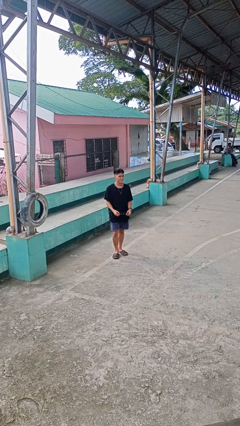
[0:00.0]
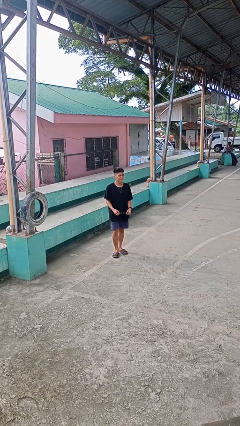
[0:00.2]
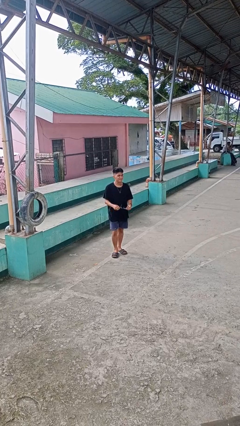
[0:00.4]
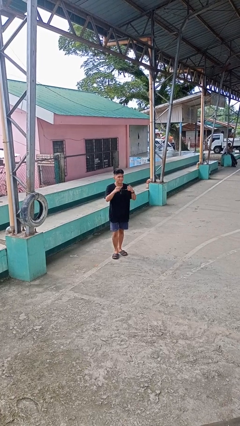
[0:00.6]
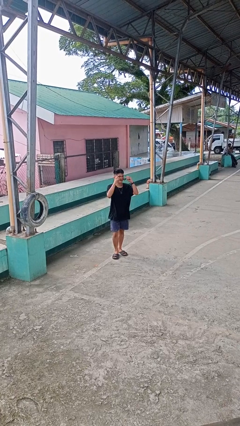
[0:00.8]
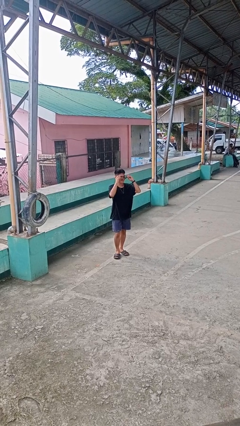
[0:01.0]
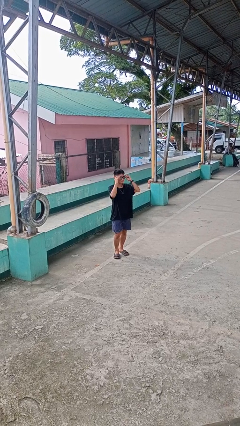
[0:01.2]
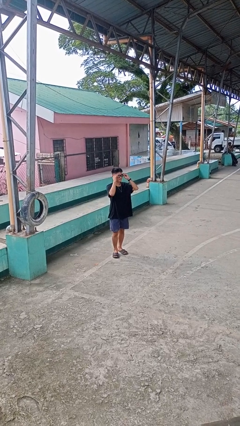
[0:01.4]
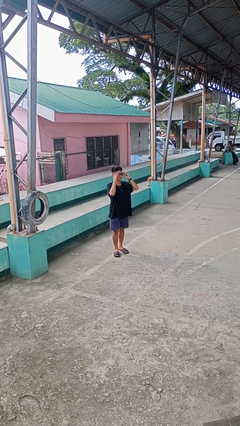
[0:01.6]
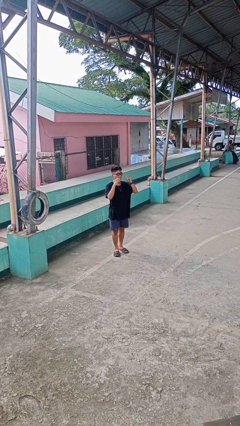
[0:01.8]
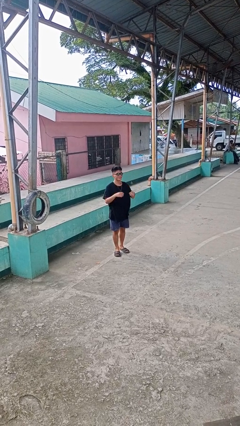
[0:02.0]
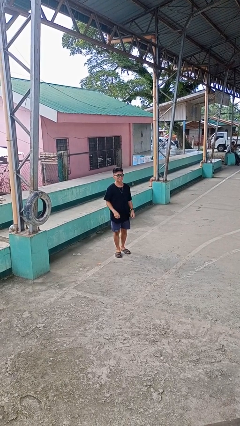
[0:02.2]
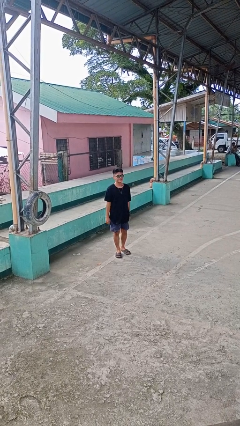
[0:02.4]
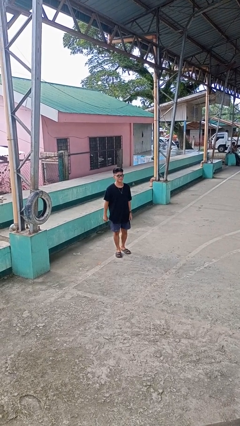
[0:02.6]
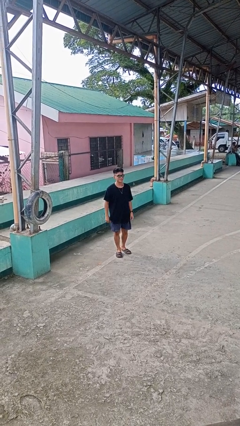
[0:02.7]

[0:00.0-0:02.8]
person puts on sunglasses

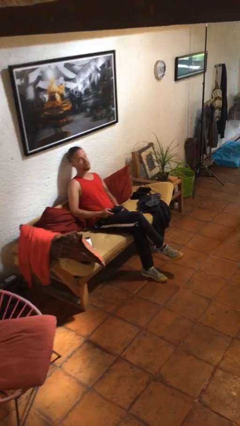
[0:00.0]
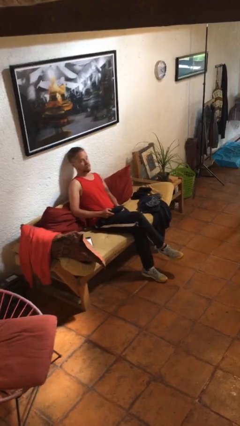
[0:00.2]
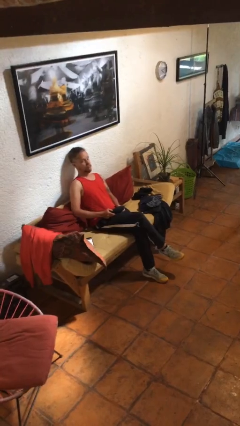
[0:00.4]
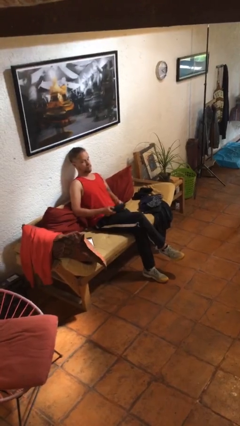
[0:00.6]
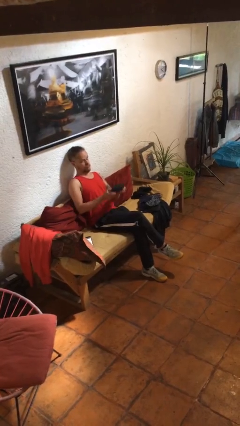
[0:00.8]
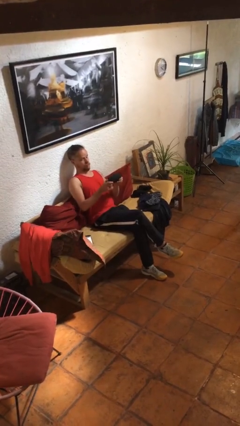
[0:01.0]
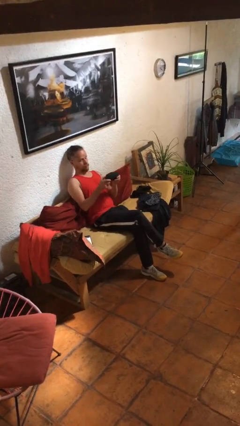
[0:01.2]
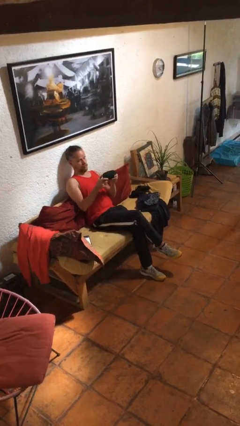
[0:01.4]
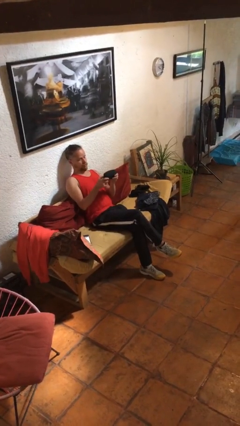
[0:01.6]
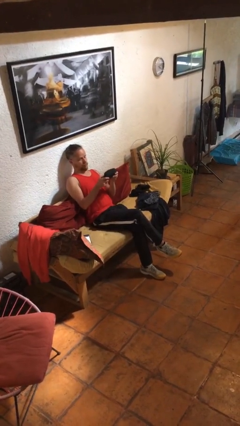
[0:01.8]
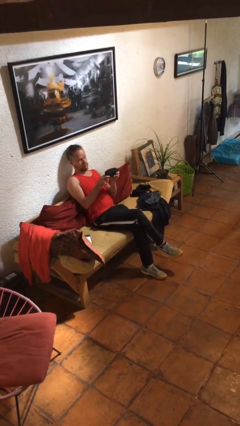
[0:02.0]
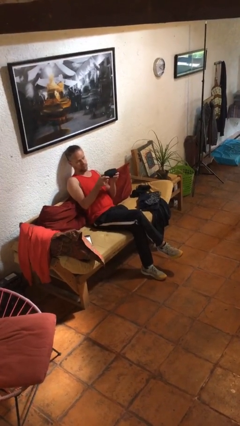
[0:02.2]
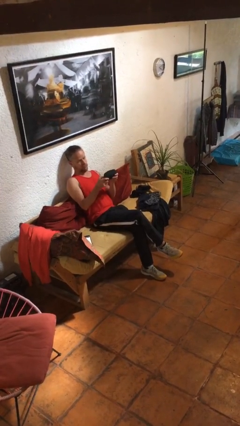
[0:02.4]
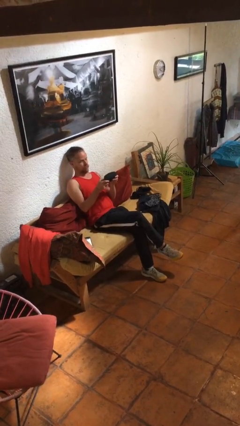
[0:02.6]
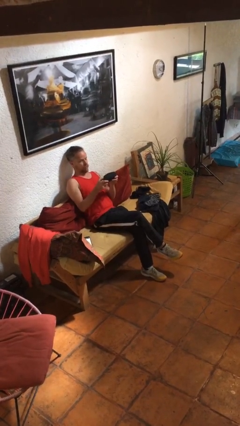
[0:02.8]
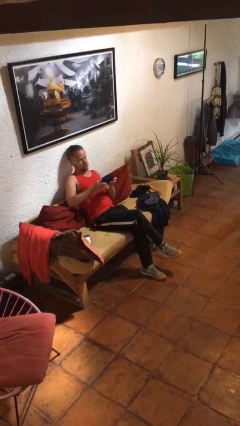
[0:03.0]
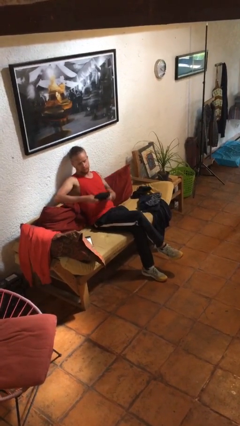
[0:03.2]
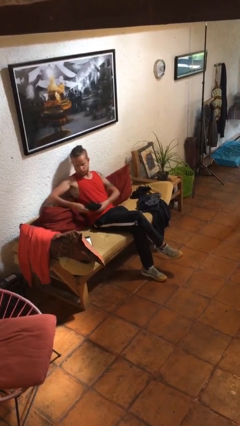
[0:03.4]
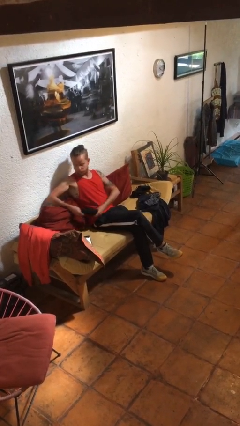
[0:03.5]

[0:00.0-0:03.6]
person interacts with handheld game

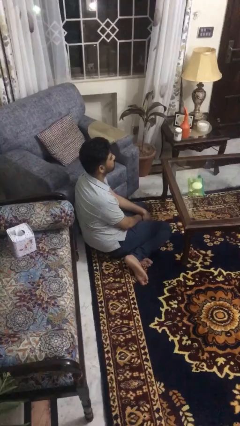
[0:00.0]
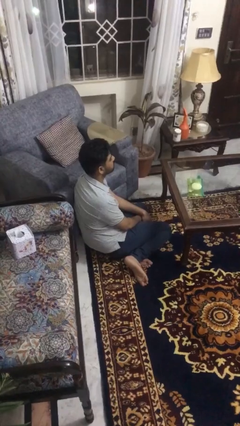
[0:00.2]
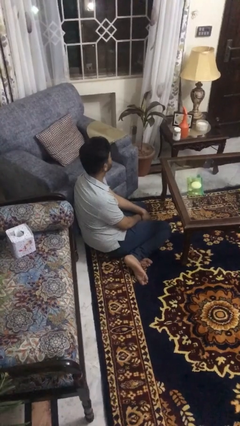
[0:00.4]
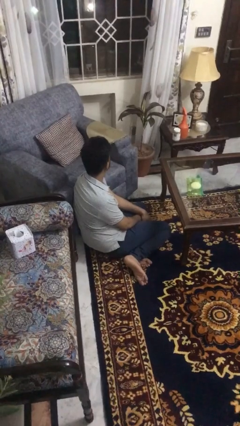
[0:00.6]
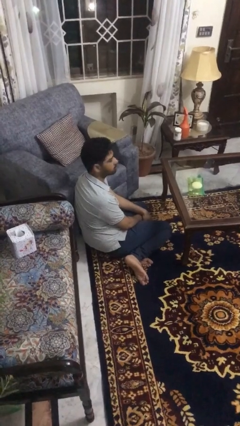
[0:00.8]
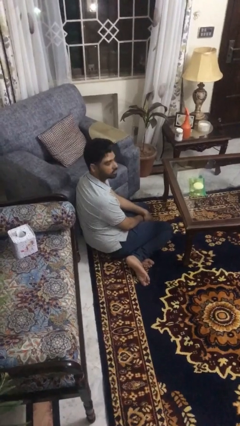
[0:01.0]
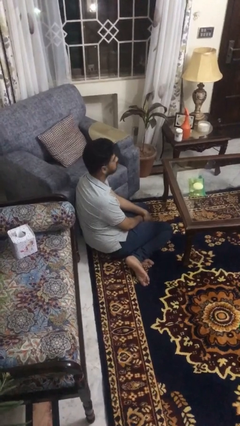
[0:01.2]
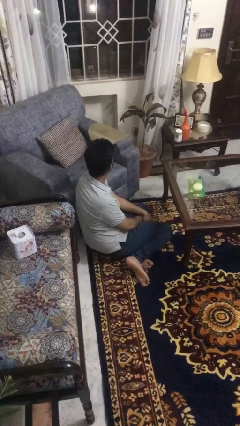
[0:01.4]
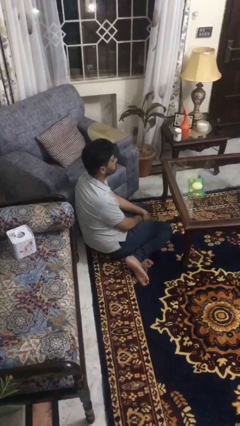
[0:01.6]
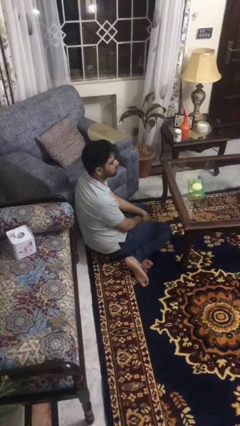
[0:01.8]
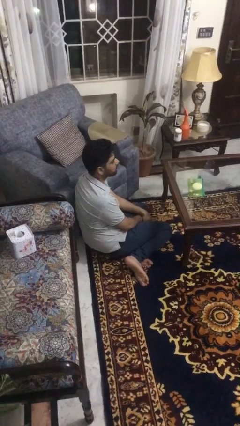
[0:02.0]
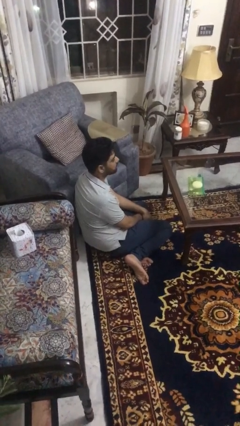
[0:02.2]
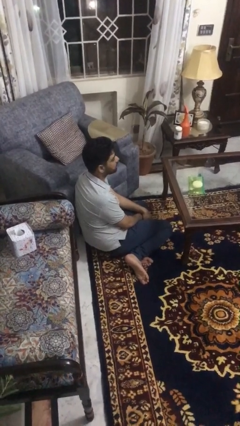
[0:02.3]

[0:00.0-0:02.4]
person shakes head

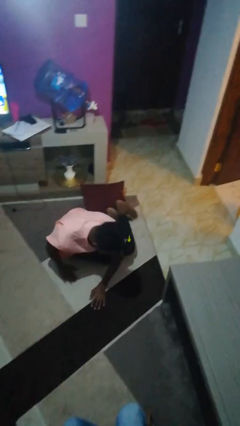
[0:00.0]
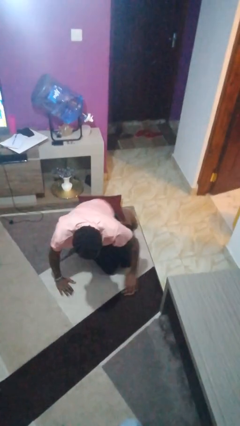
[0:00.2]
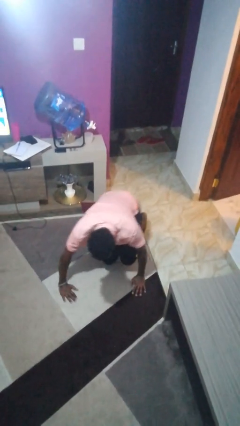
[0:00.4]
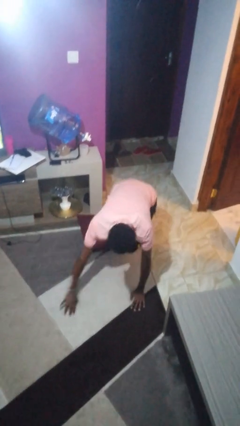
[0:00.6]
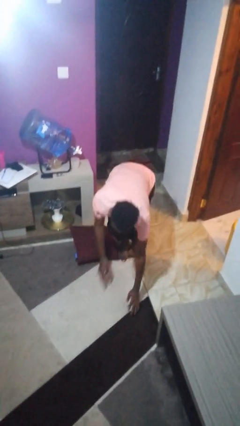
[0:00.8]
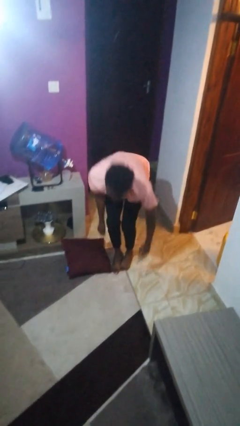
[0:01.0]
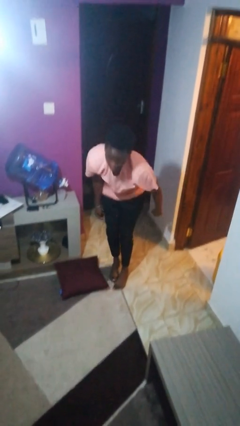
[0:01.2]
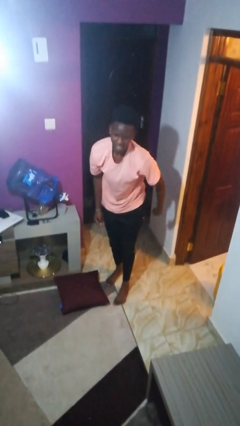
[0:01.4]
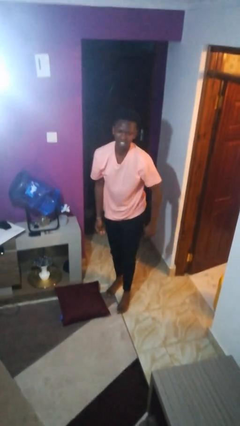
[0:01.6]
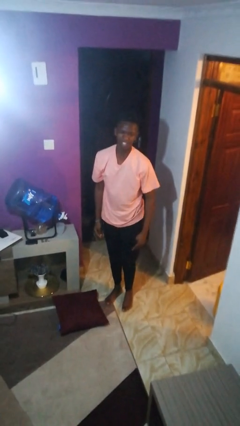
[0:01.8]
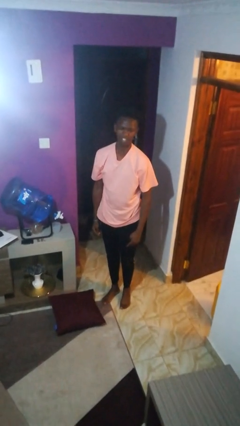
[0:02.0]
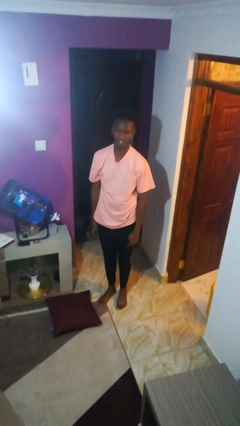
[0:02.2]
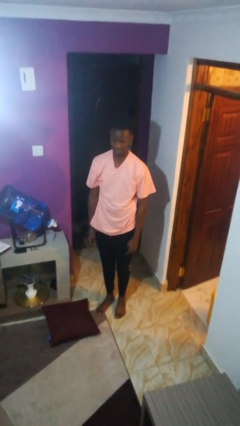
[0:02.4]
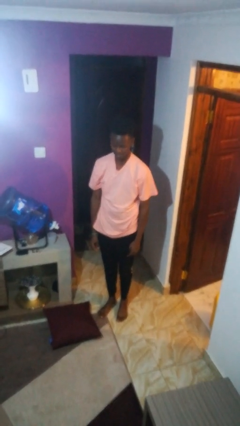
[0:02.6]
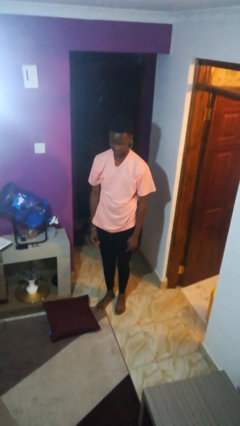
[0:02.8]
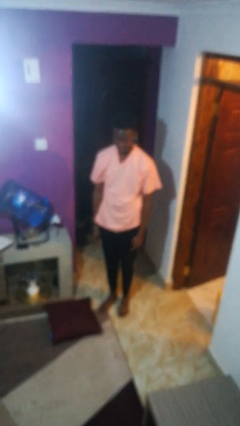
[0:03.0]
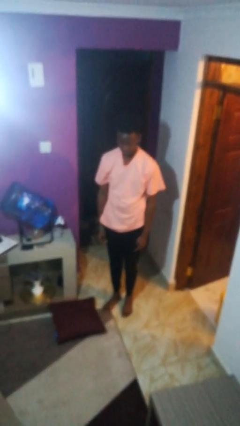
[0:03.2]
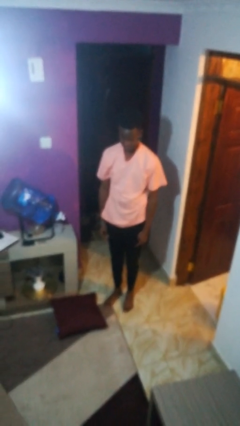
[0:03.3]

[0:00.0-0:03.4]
person stands up from floor

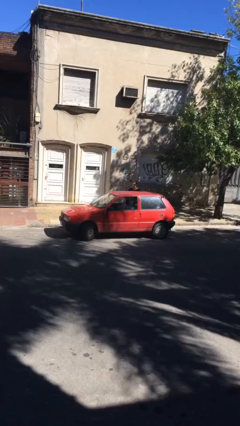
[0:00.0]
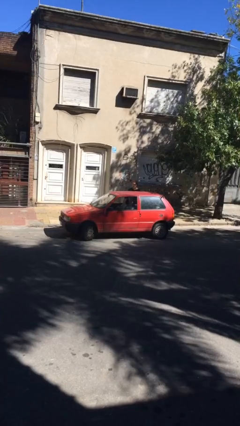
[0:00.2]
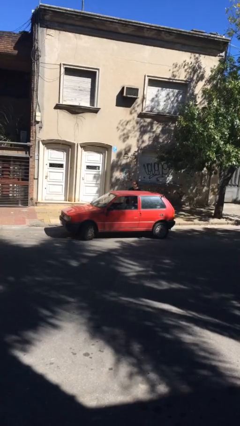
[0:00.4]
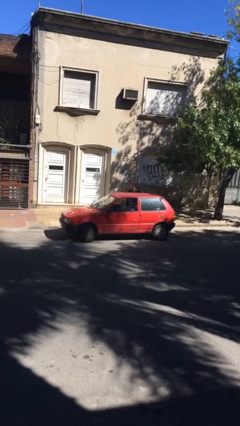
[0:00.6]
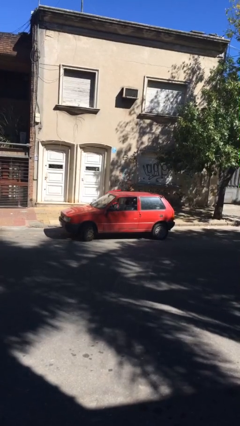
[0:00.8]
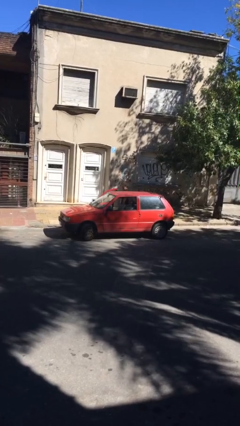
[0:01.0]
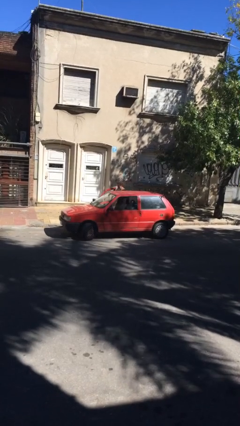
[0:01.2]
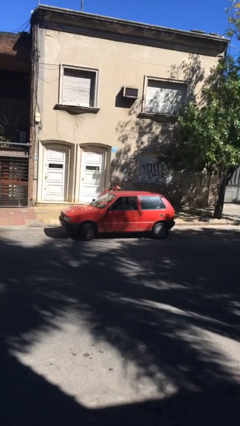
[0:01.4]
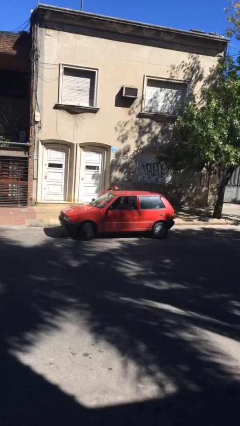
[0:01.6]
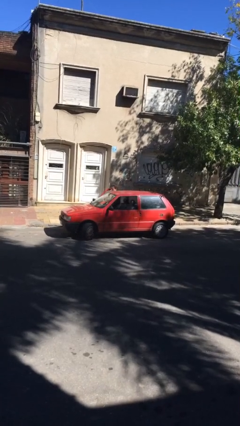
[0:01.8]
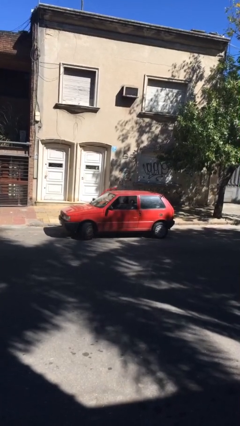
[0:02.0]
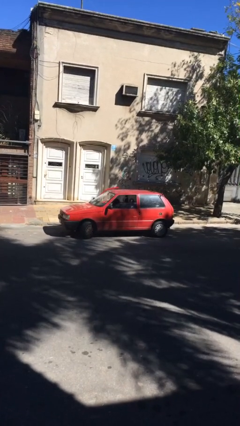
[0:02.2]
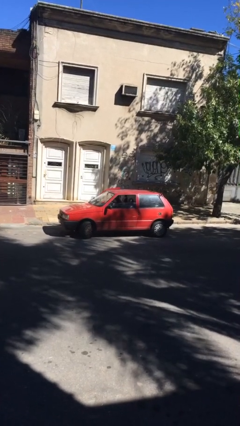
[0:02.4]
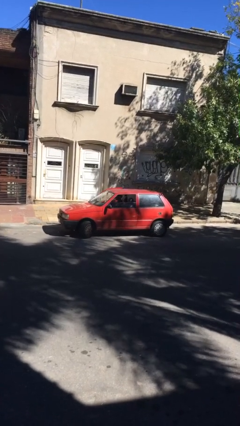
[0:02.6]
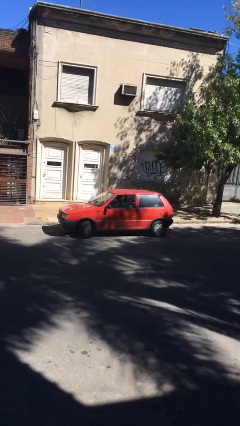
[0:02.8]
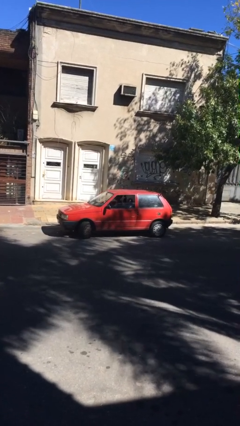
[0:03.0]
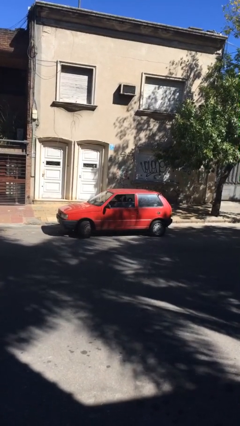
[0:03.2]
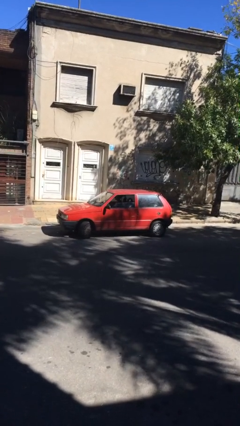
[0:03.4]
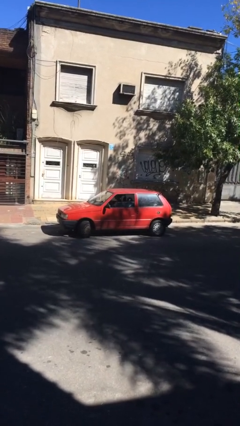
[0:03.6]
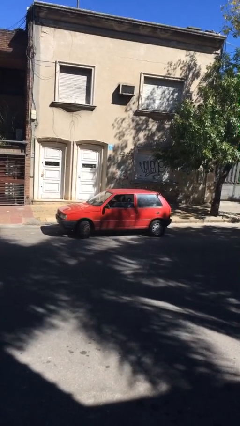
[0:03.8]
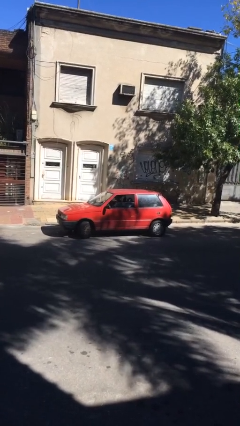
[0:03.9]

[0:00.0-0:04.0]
car picks up person

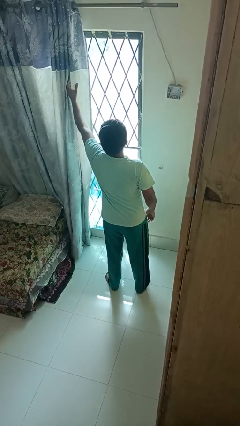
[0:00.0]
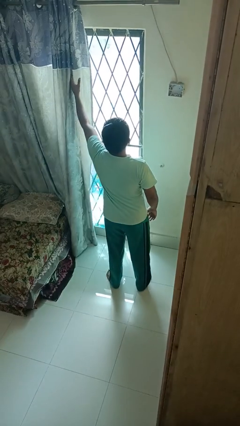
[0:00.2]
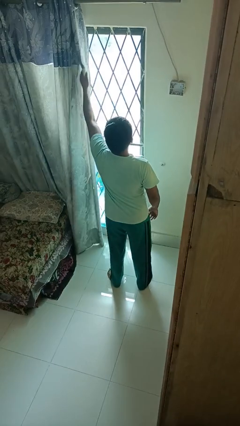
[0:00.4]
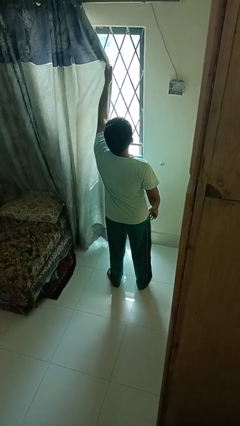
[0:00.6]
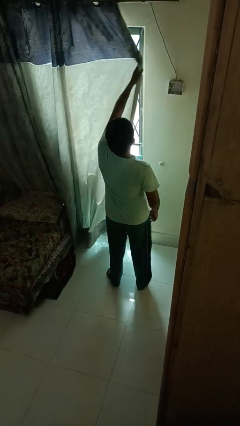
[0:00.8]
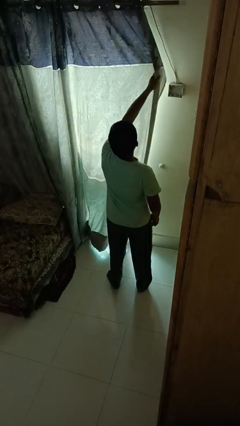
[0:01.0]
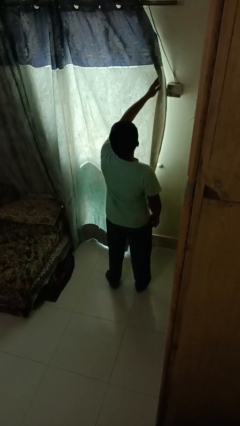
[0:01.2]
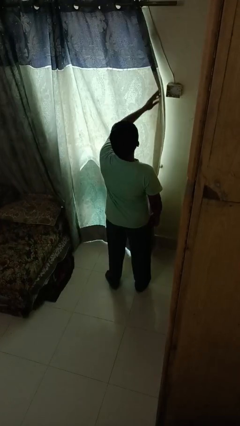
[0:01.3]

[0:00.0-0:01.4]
person closes curtains
